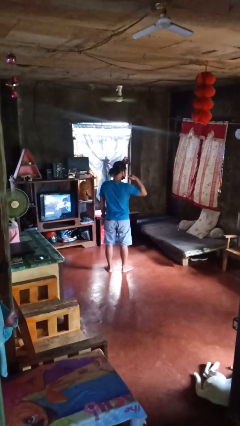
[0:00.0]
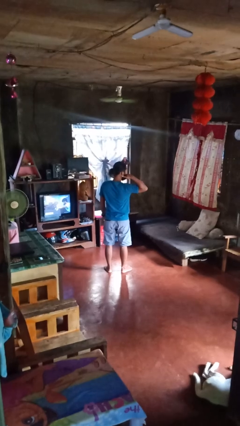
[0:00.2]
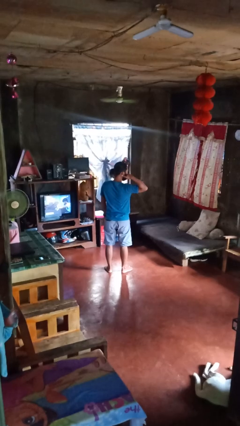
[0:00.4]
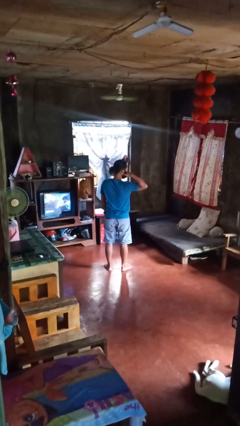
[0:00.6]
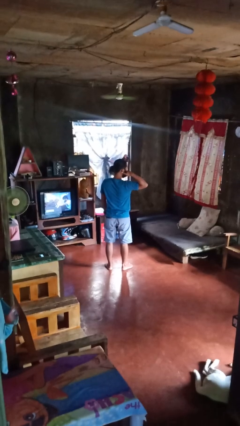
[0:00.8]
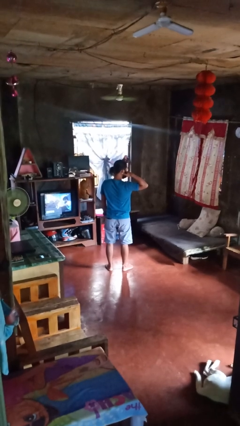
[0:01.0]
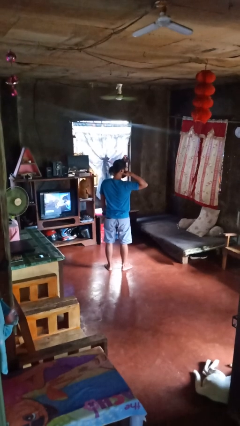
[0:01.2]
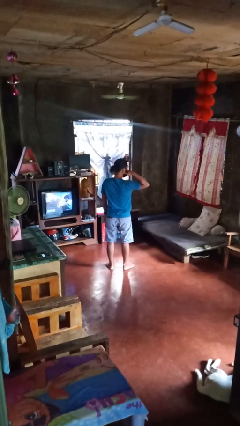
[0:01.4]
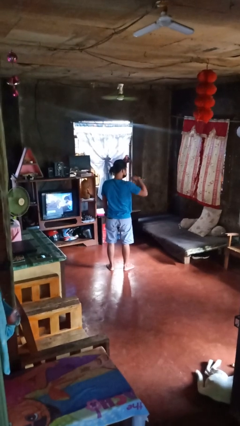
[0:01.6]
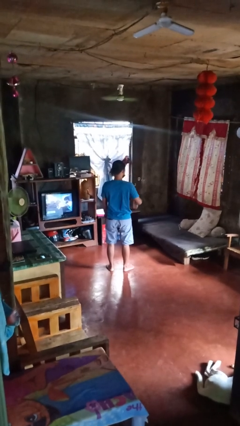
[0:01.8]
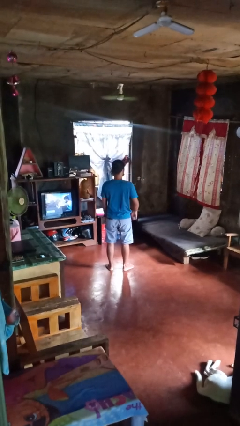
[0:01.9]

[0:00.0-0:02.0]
person gestures call me

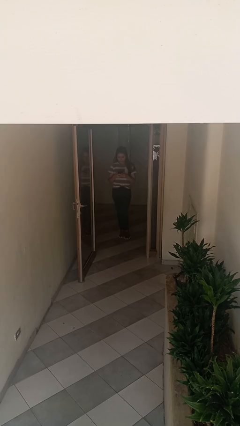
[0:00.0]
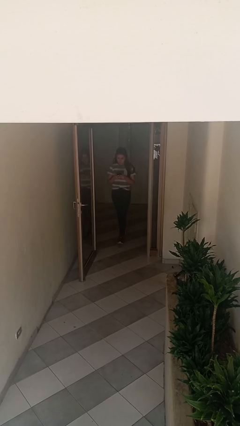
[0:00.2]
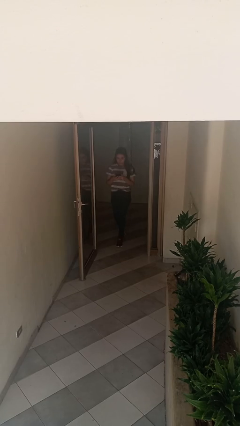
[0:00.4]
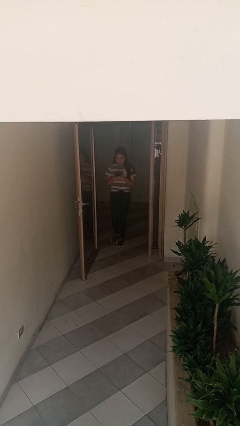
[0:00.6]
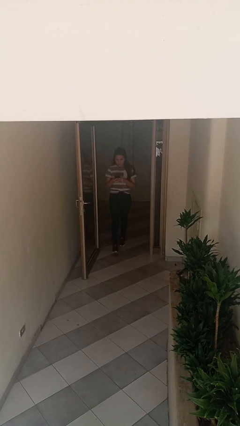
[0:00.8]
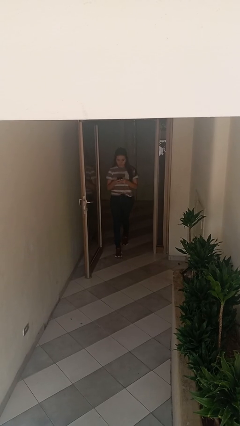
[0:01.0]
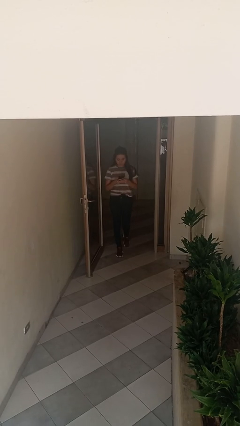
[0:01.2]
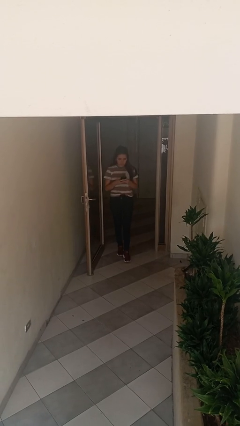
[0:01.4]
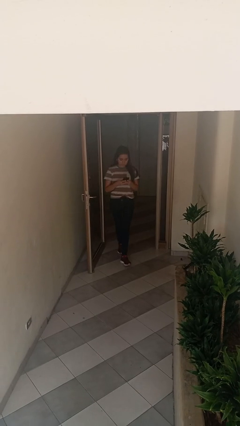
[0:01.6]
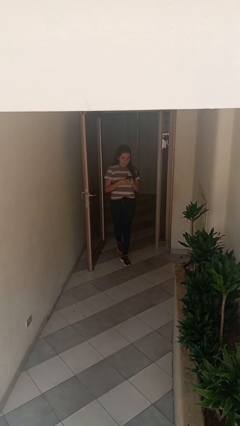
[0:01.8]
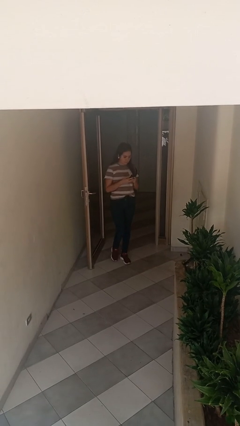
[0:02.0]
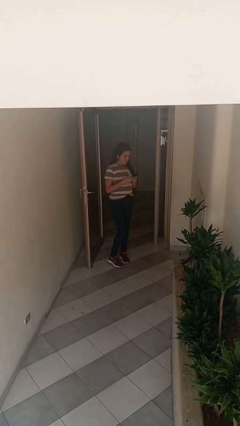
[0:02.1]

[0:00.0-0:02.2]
person enters scene through structure

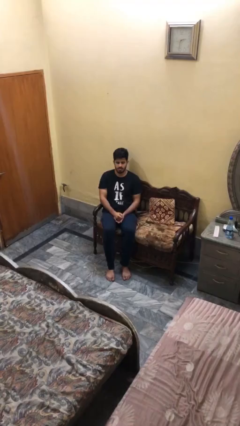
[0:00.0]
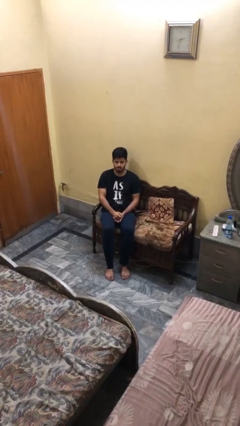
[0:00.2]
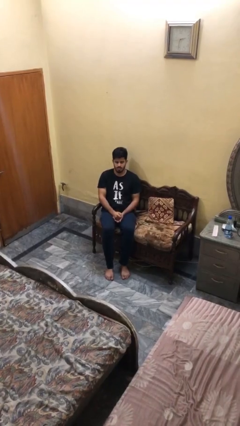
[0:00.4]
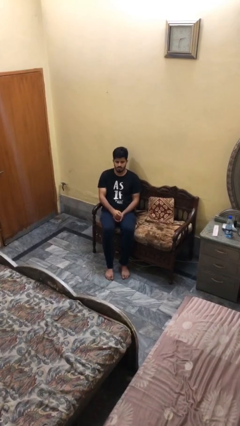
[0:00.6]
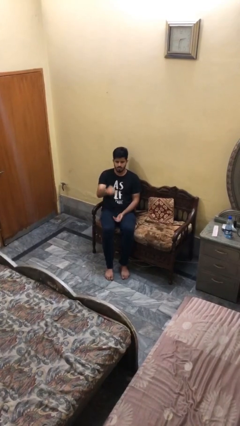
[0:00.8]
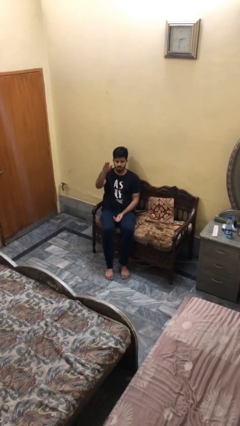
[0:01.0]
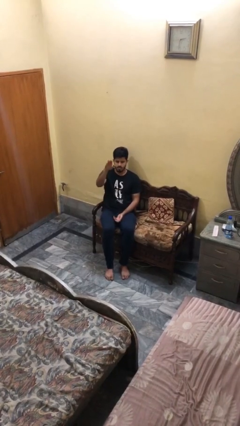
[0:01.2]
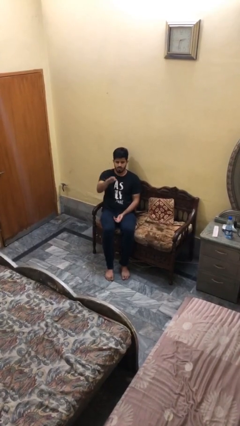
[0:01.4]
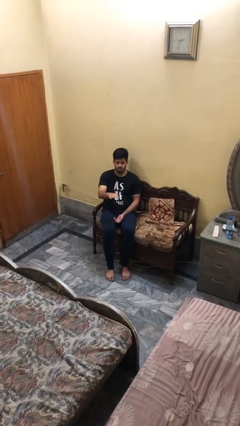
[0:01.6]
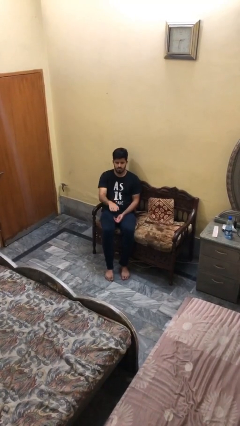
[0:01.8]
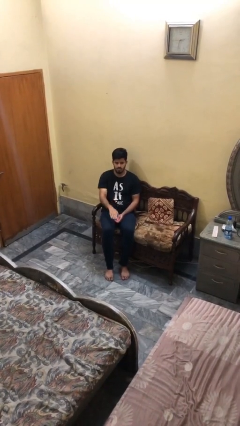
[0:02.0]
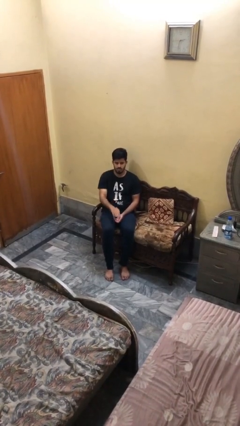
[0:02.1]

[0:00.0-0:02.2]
person gestures swipe down

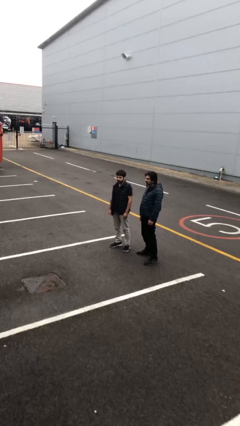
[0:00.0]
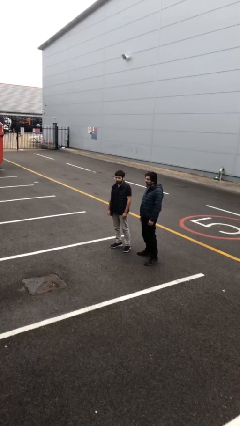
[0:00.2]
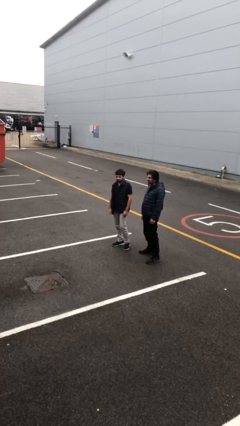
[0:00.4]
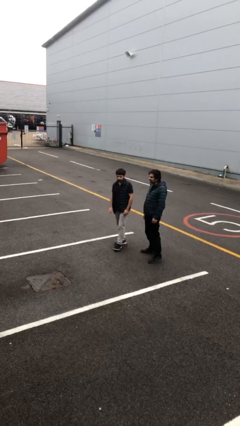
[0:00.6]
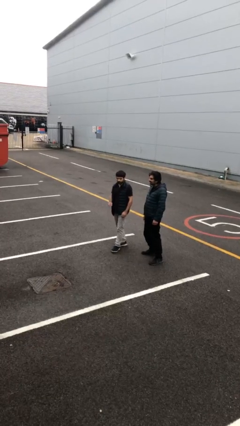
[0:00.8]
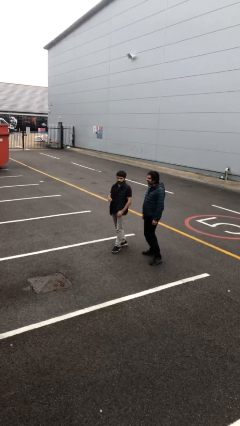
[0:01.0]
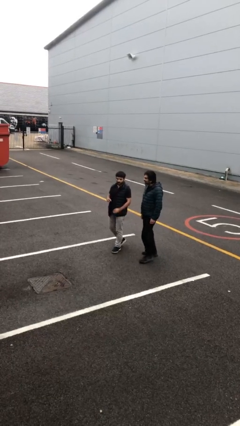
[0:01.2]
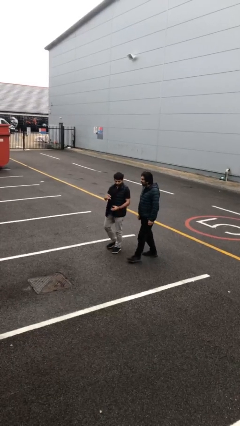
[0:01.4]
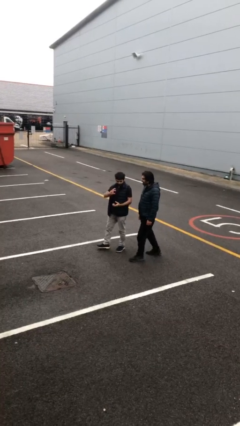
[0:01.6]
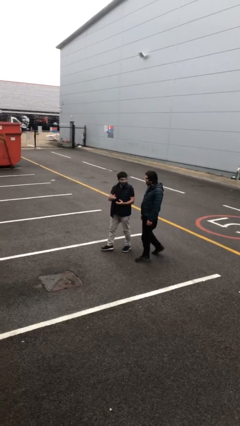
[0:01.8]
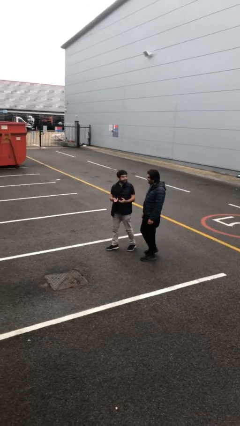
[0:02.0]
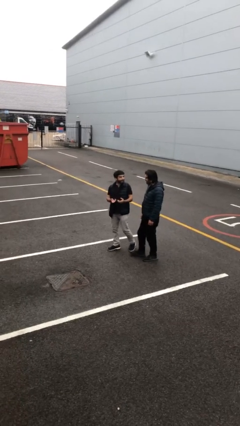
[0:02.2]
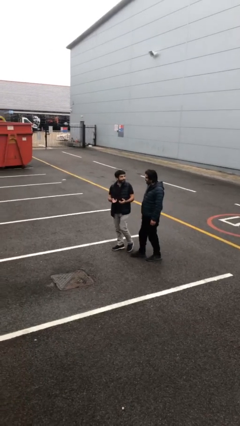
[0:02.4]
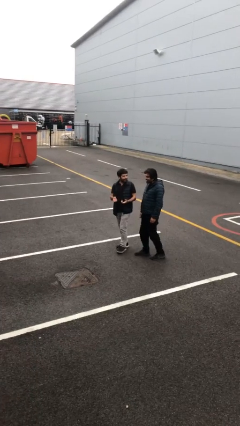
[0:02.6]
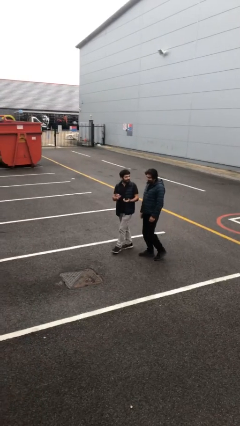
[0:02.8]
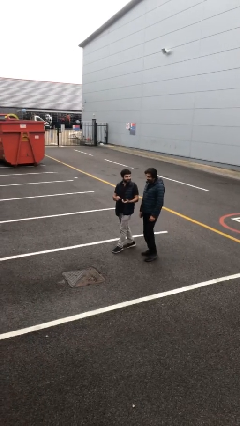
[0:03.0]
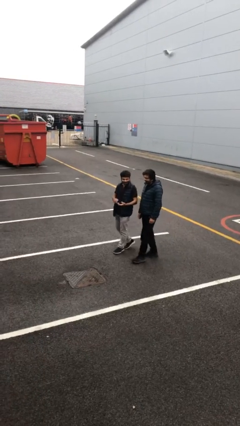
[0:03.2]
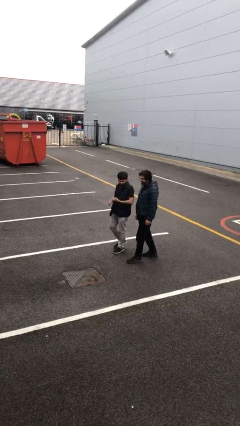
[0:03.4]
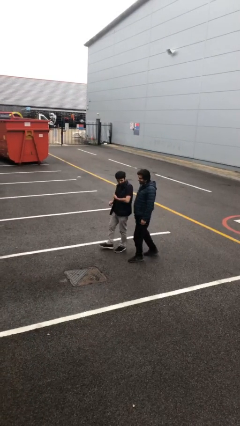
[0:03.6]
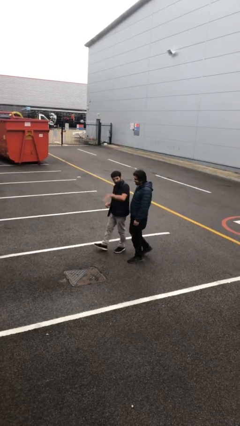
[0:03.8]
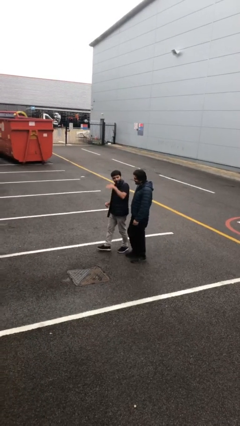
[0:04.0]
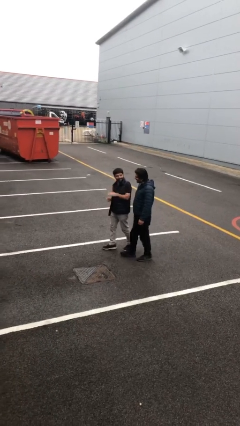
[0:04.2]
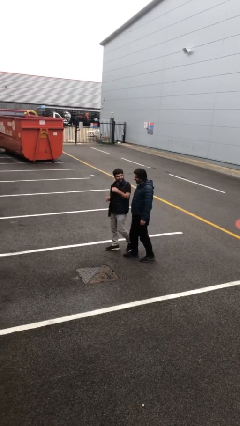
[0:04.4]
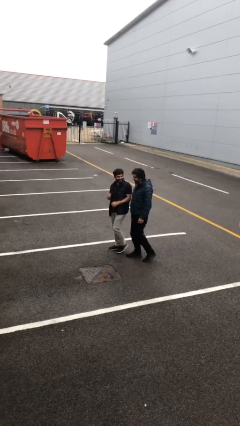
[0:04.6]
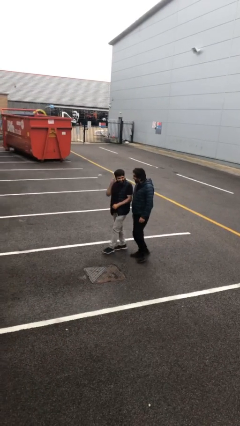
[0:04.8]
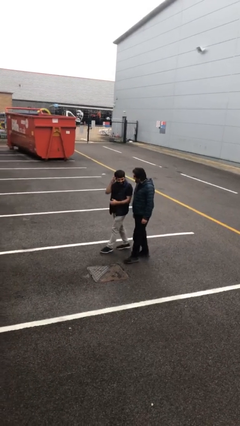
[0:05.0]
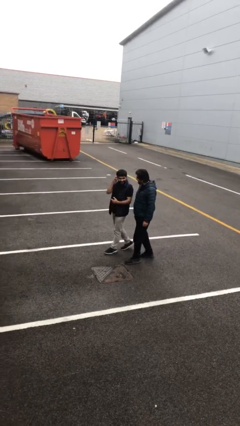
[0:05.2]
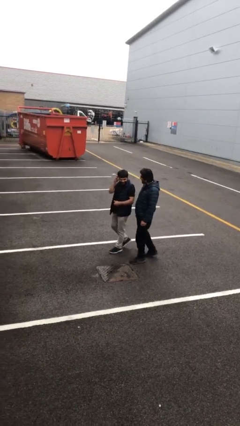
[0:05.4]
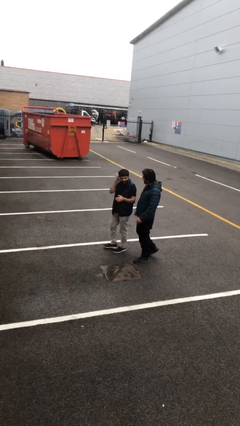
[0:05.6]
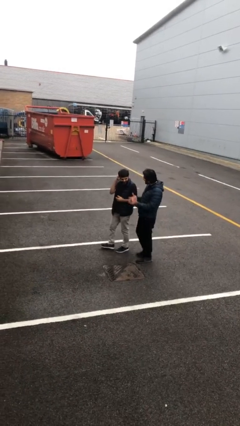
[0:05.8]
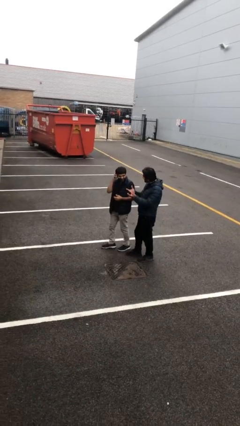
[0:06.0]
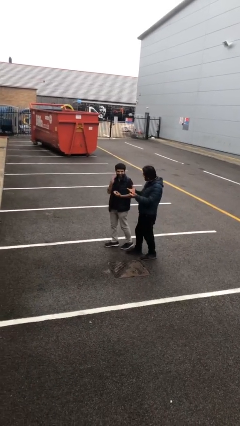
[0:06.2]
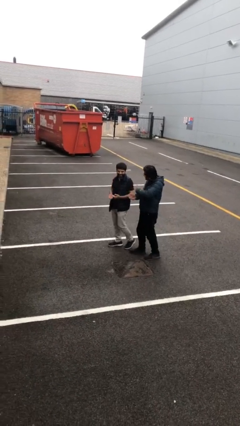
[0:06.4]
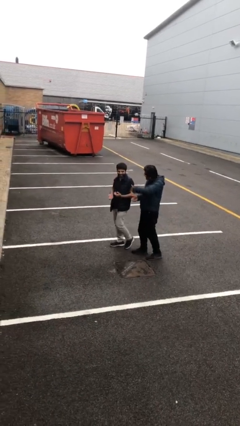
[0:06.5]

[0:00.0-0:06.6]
person talks to person

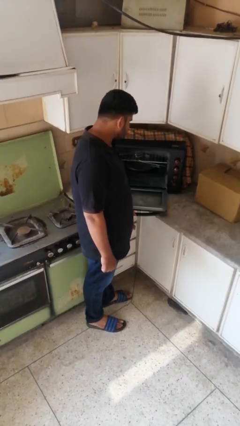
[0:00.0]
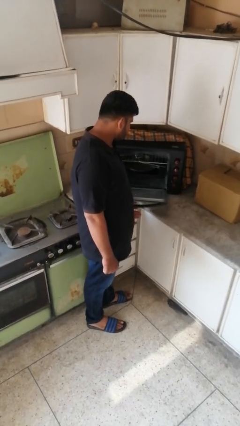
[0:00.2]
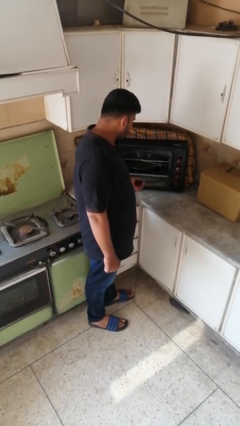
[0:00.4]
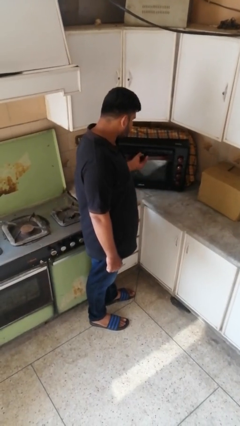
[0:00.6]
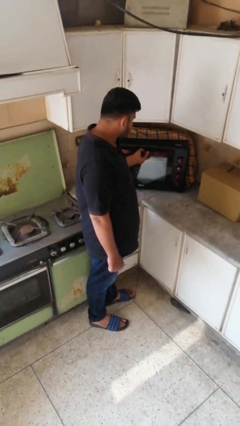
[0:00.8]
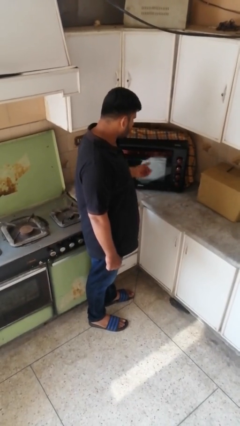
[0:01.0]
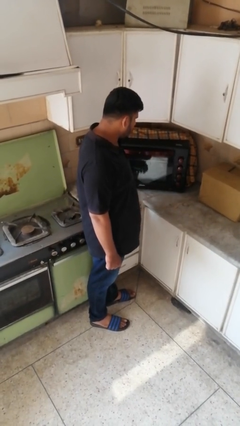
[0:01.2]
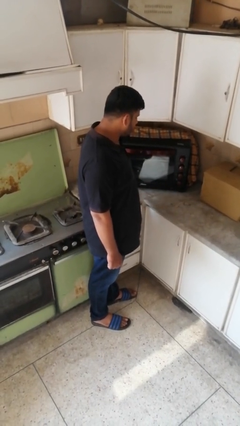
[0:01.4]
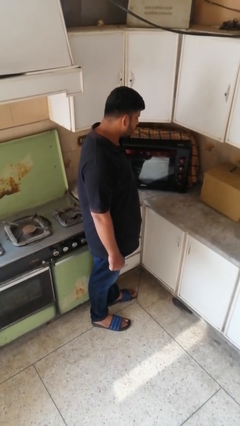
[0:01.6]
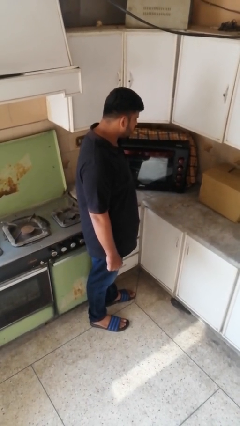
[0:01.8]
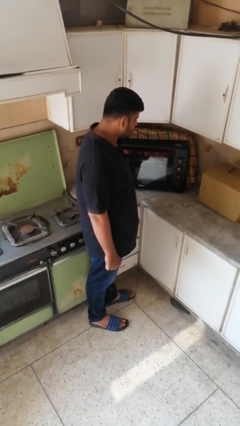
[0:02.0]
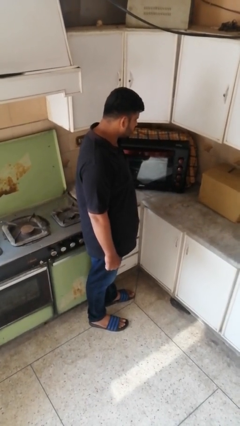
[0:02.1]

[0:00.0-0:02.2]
person closes oven door

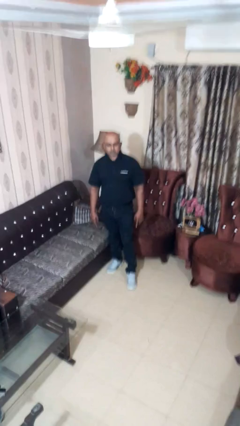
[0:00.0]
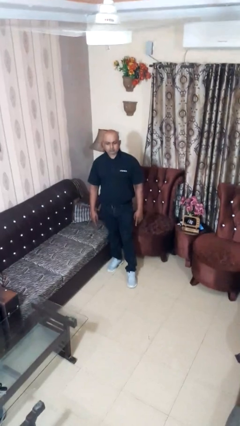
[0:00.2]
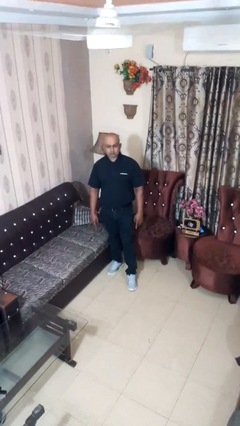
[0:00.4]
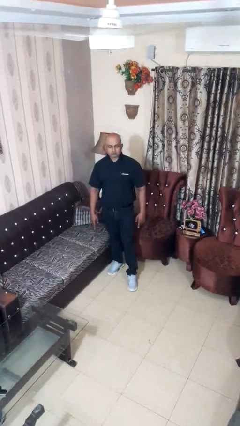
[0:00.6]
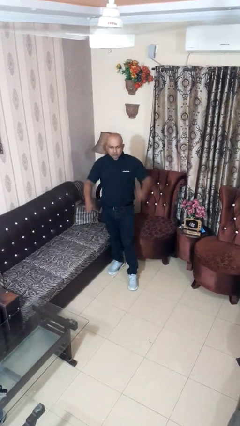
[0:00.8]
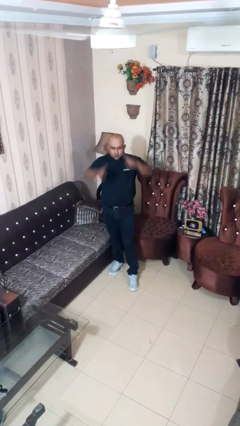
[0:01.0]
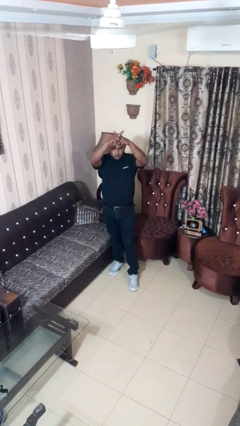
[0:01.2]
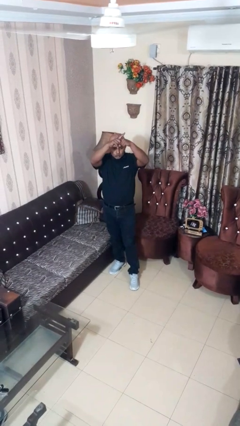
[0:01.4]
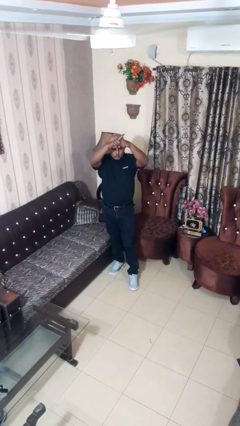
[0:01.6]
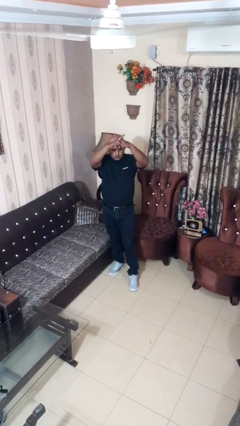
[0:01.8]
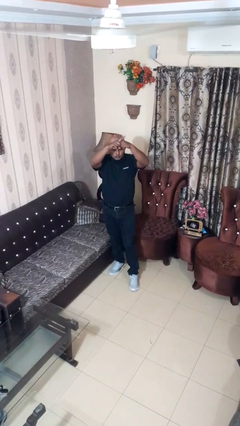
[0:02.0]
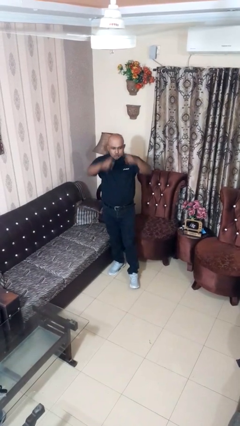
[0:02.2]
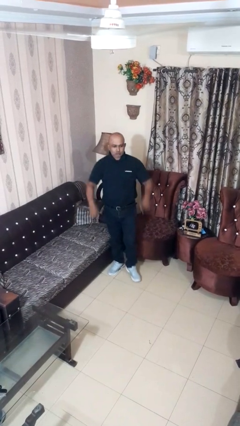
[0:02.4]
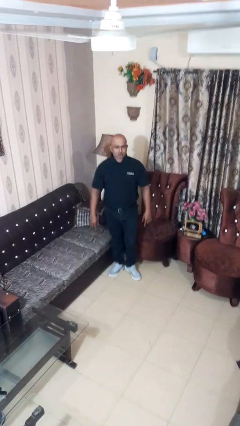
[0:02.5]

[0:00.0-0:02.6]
person gestures arms x
